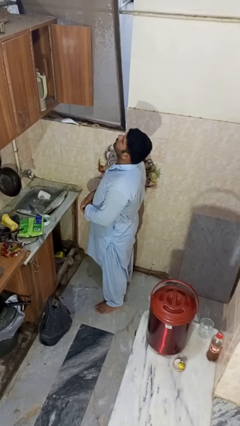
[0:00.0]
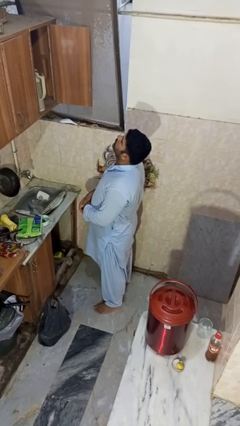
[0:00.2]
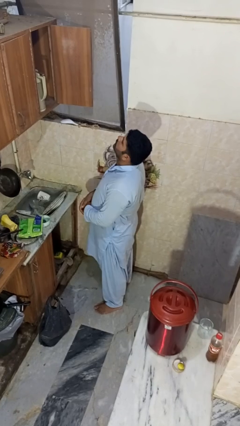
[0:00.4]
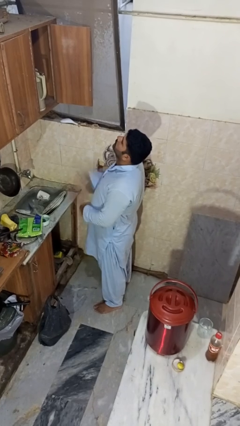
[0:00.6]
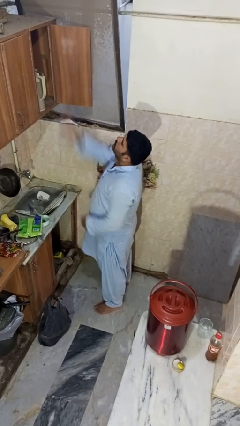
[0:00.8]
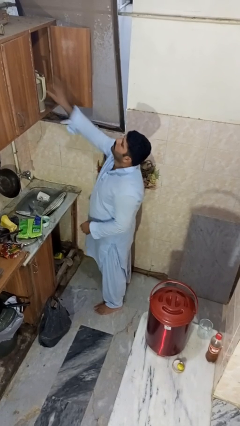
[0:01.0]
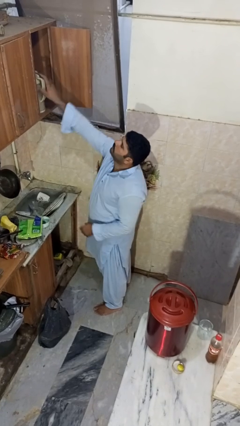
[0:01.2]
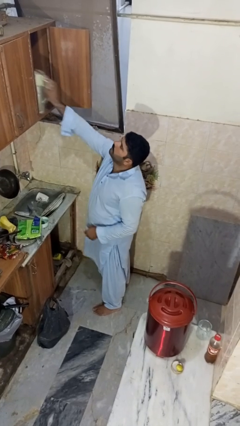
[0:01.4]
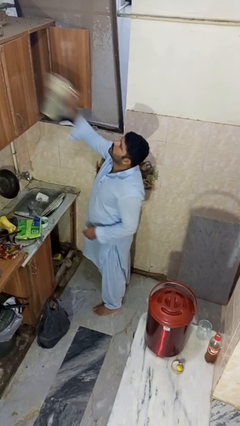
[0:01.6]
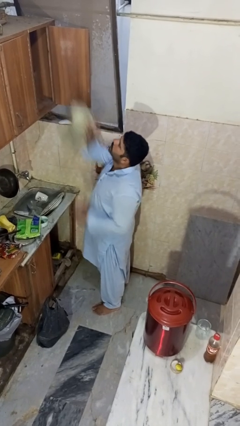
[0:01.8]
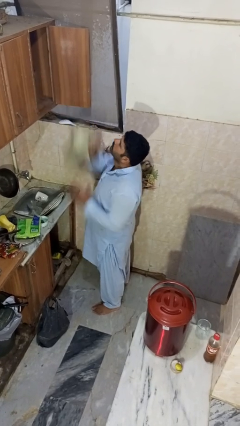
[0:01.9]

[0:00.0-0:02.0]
person takes object from cabinet

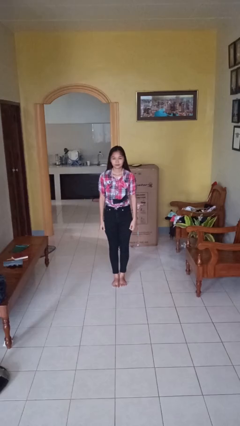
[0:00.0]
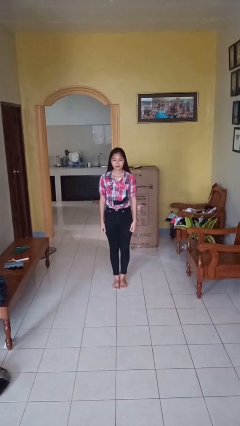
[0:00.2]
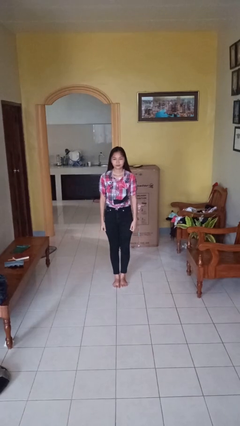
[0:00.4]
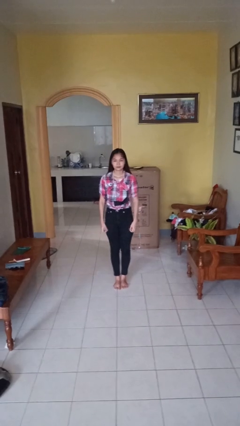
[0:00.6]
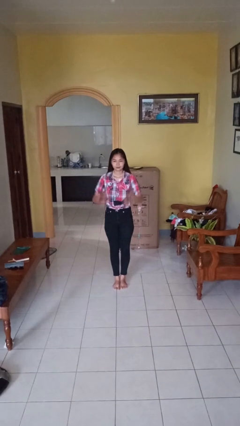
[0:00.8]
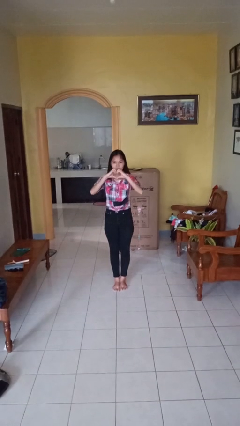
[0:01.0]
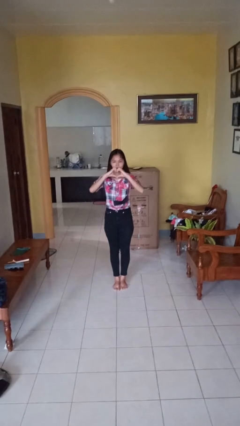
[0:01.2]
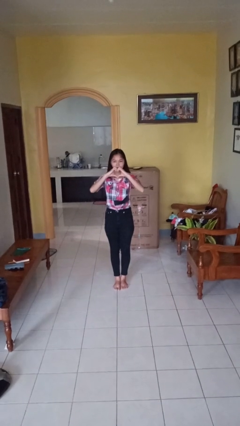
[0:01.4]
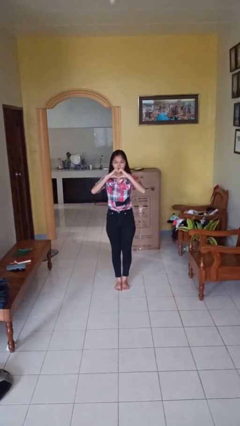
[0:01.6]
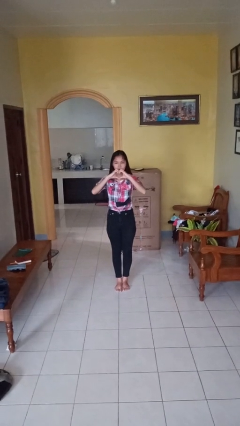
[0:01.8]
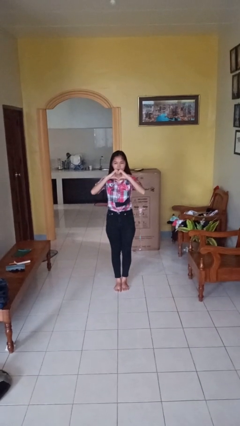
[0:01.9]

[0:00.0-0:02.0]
person gestures heart

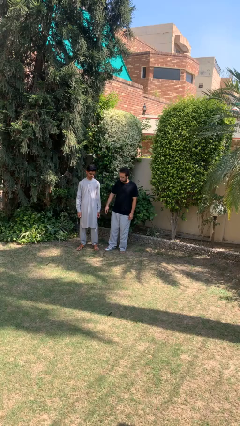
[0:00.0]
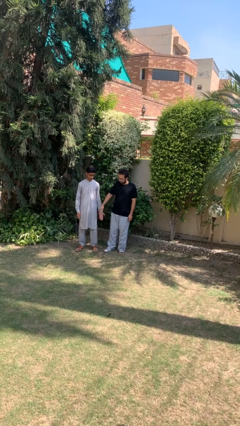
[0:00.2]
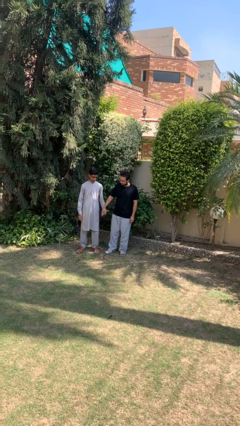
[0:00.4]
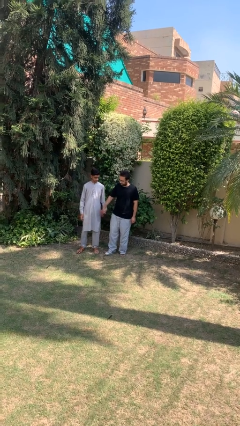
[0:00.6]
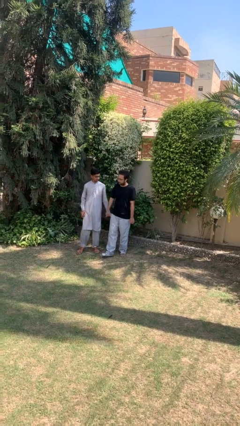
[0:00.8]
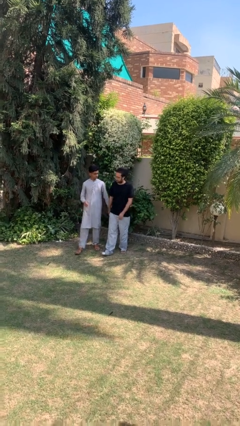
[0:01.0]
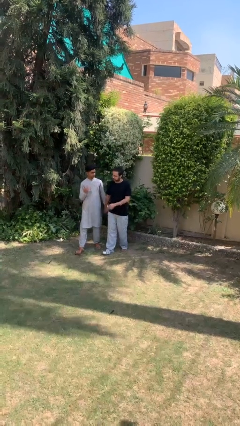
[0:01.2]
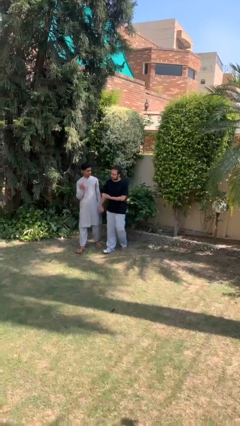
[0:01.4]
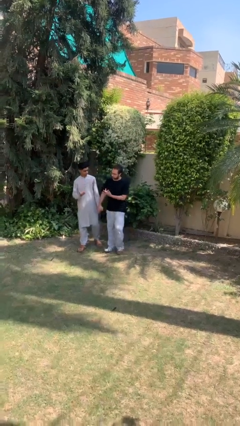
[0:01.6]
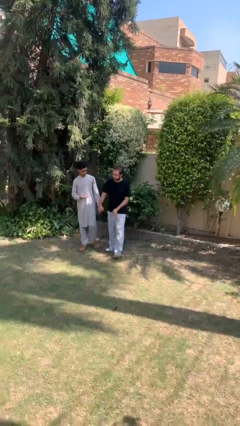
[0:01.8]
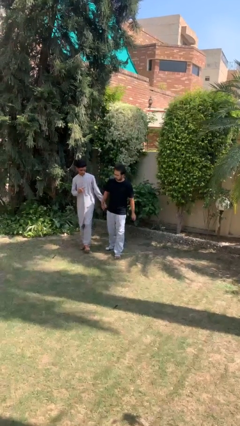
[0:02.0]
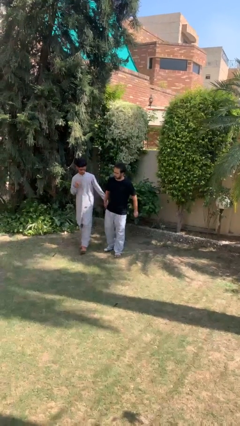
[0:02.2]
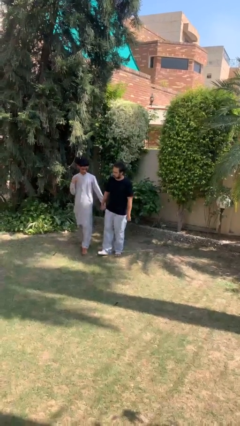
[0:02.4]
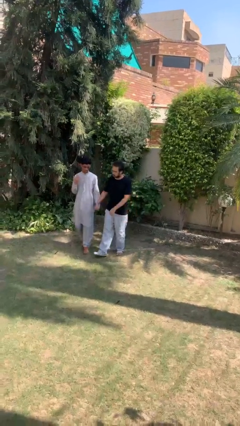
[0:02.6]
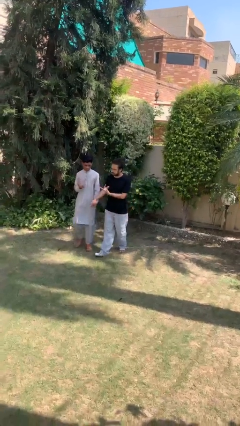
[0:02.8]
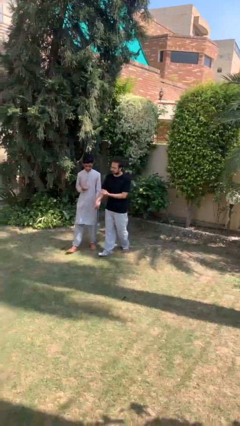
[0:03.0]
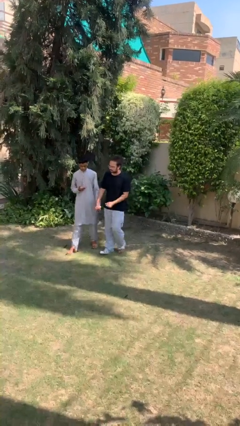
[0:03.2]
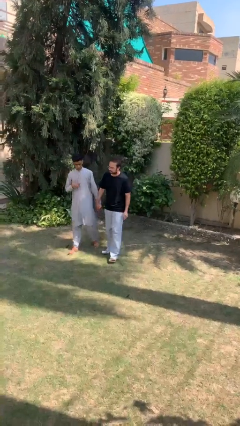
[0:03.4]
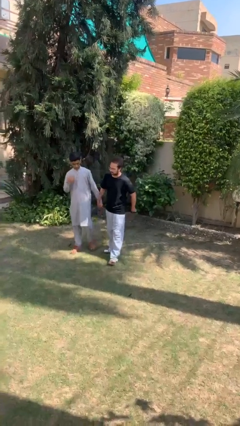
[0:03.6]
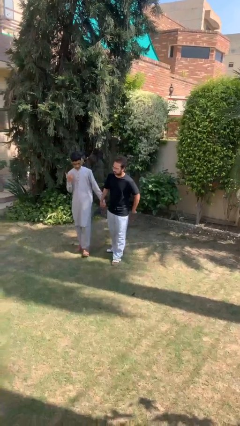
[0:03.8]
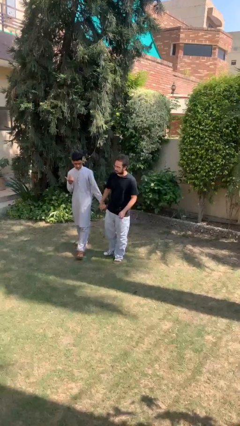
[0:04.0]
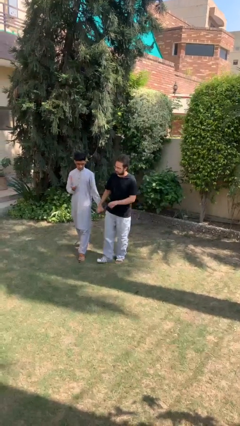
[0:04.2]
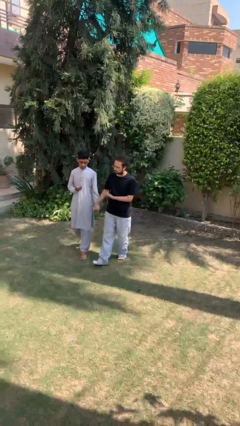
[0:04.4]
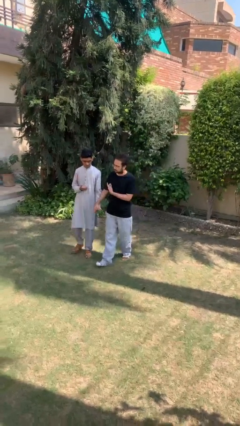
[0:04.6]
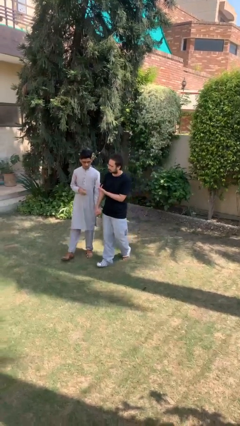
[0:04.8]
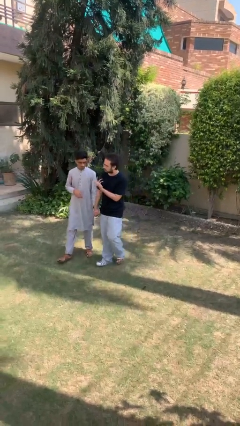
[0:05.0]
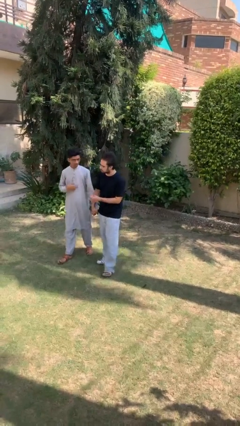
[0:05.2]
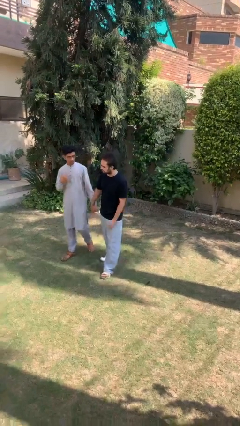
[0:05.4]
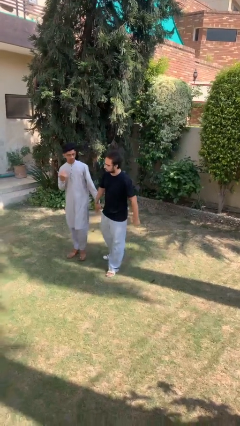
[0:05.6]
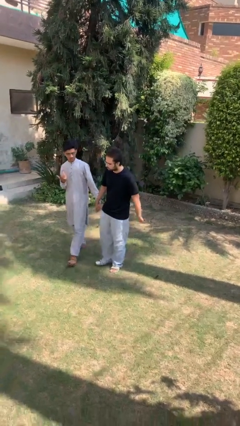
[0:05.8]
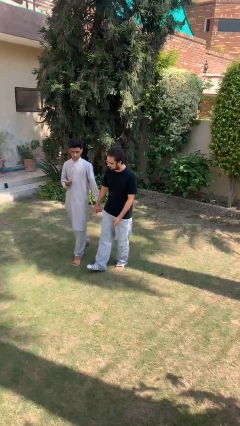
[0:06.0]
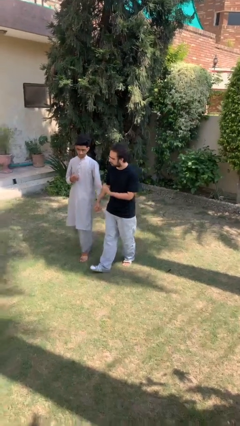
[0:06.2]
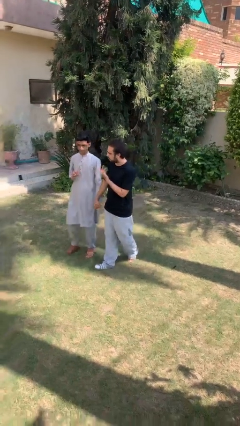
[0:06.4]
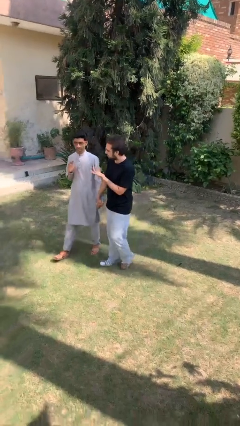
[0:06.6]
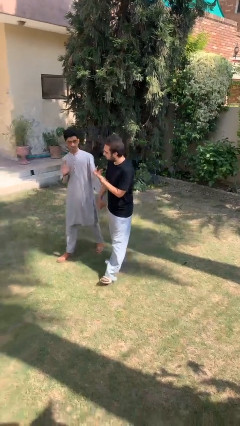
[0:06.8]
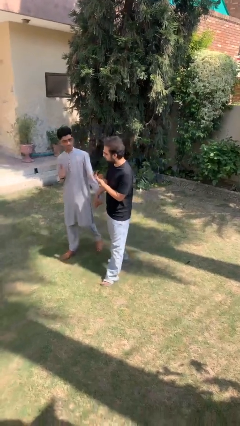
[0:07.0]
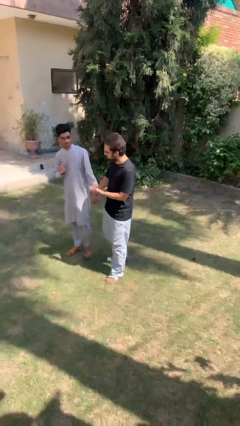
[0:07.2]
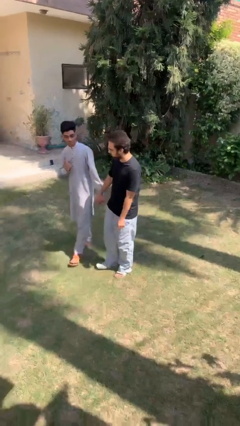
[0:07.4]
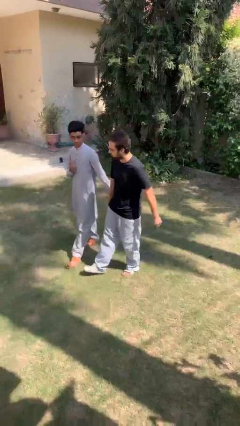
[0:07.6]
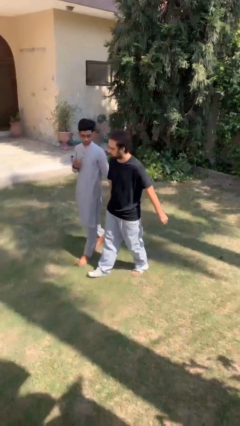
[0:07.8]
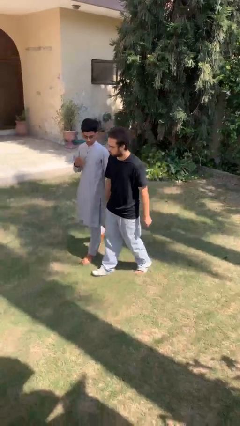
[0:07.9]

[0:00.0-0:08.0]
person holds hand

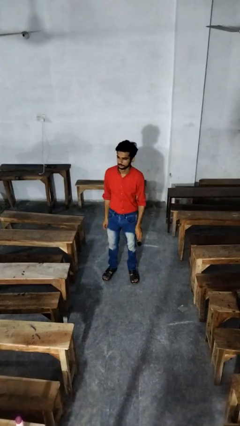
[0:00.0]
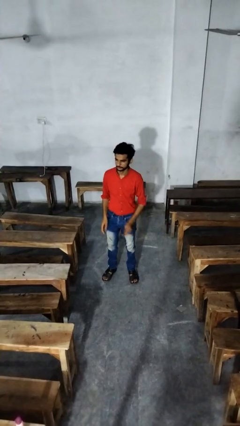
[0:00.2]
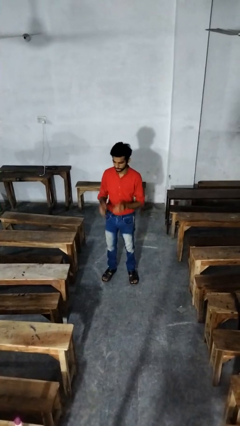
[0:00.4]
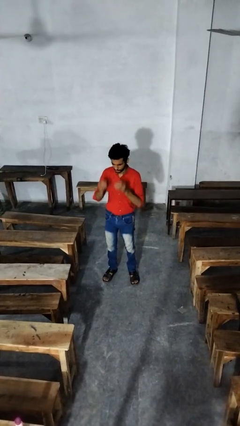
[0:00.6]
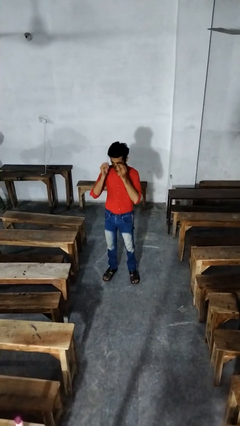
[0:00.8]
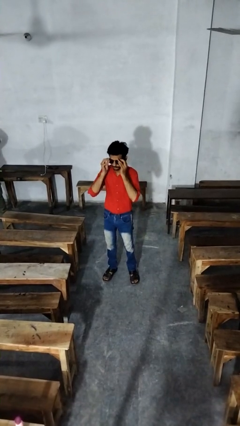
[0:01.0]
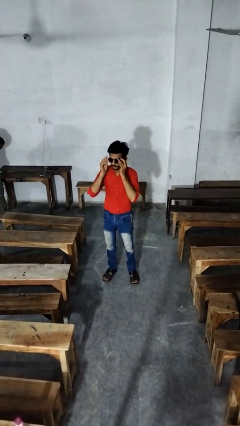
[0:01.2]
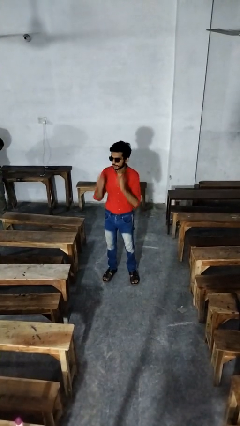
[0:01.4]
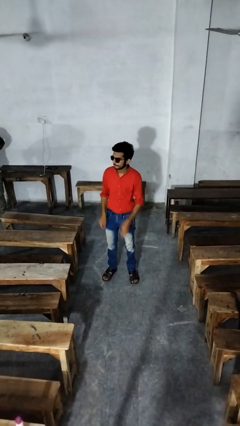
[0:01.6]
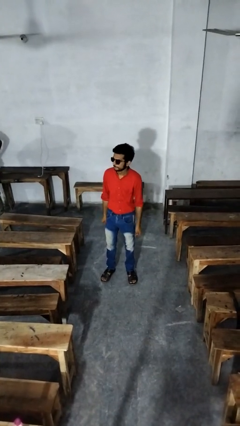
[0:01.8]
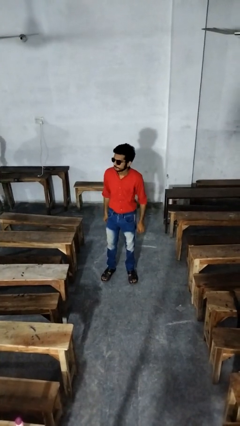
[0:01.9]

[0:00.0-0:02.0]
person puts on sunglasses

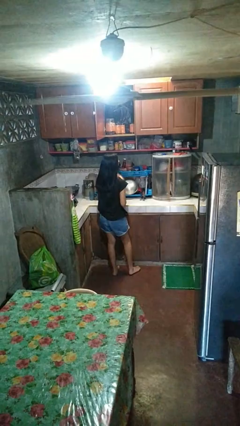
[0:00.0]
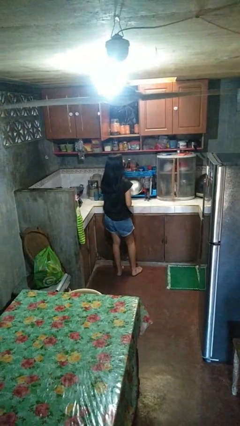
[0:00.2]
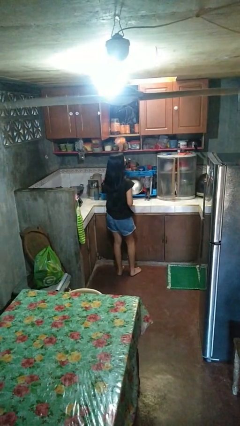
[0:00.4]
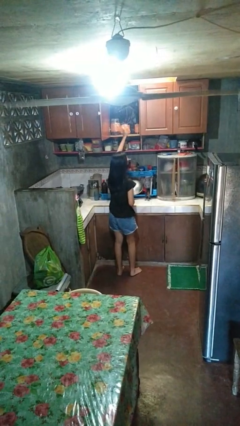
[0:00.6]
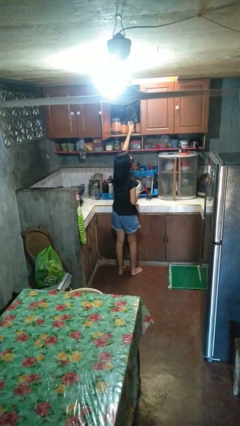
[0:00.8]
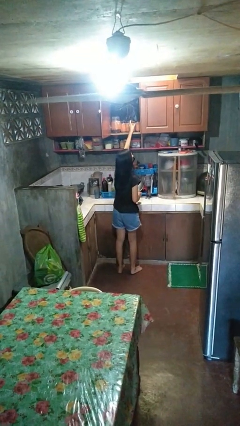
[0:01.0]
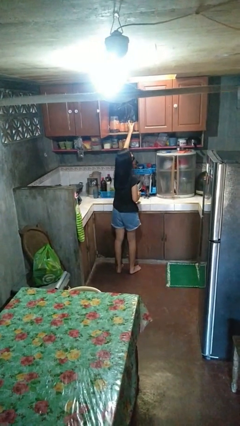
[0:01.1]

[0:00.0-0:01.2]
person puts down object into cabinet

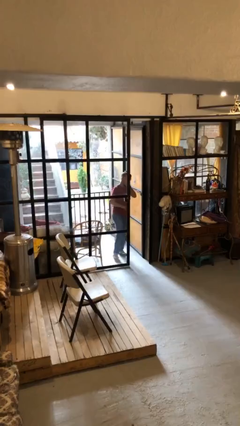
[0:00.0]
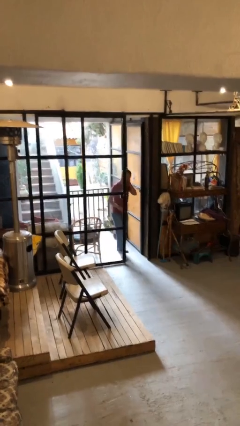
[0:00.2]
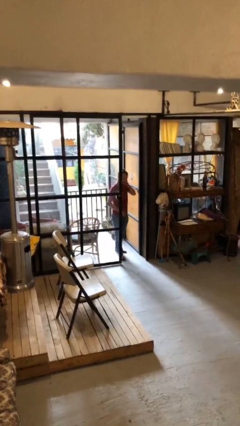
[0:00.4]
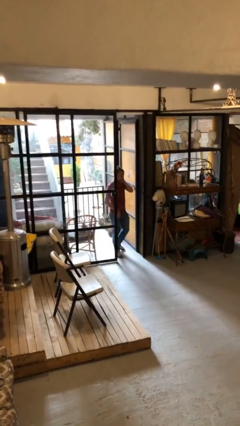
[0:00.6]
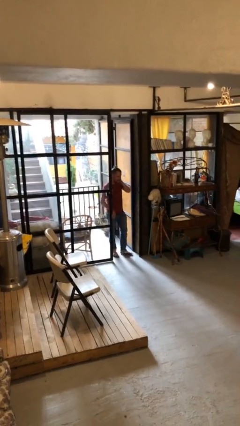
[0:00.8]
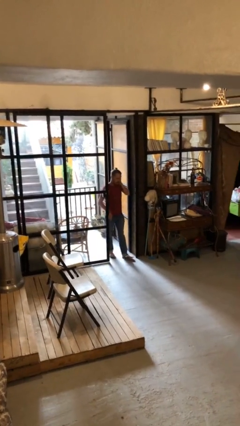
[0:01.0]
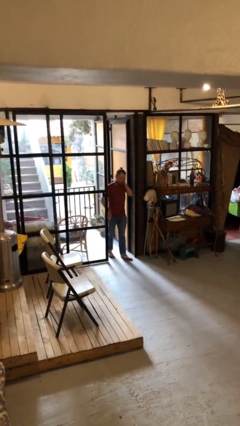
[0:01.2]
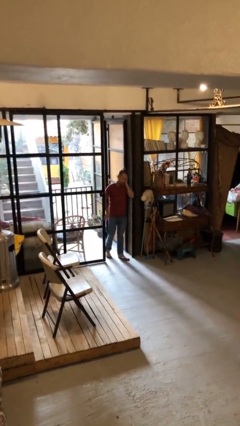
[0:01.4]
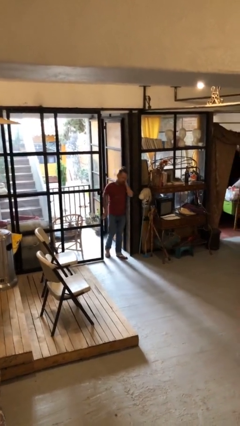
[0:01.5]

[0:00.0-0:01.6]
person enters scene through structure

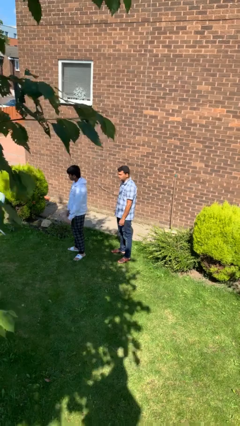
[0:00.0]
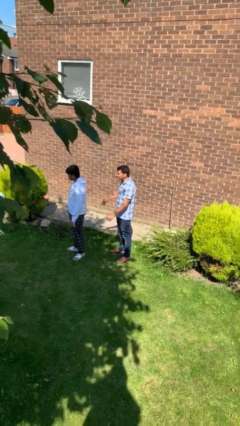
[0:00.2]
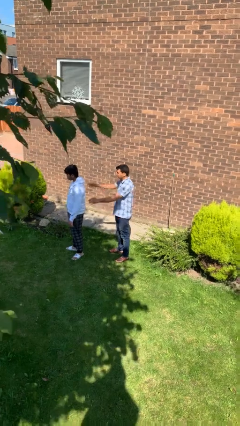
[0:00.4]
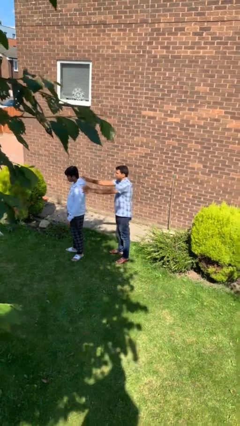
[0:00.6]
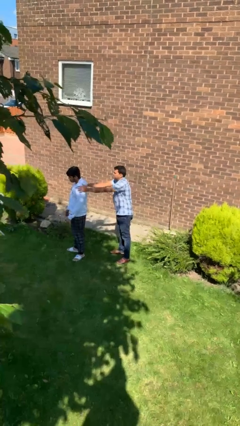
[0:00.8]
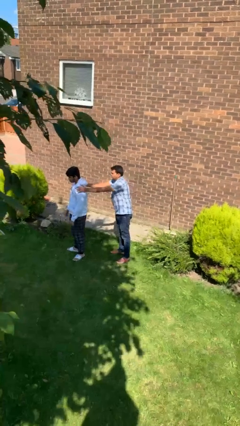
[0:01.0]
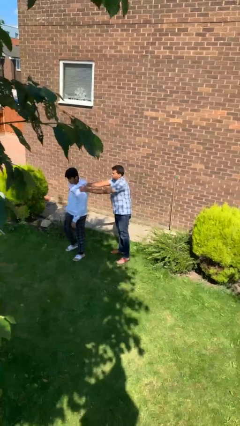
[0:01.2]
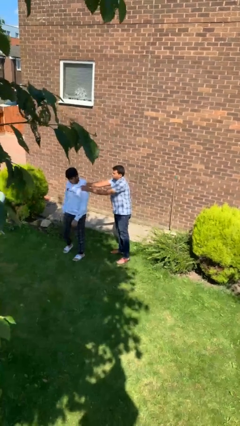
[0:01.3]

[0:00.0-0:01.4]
person grabs person by shoulder
